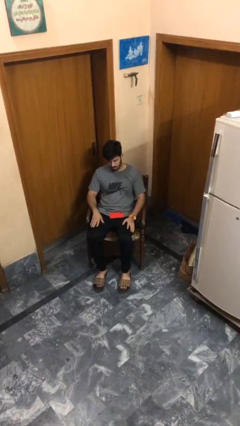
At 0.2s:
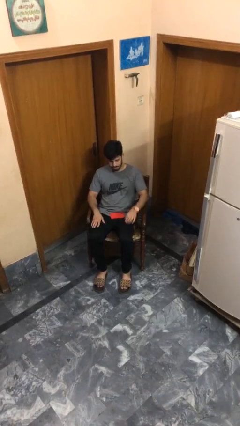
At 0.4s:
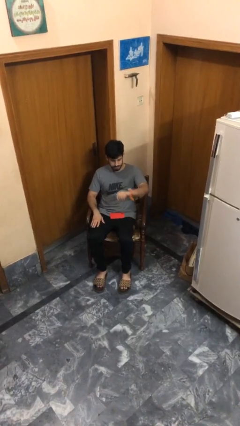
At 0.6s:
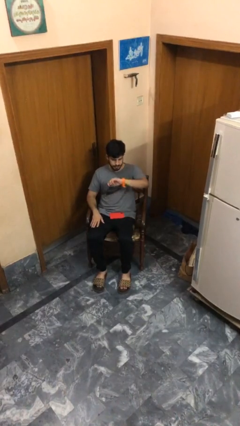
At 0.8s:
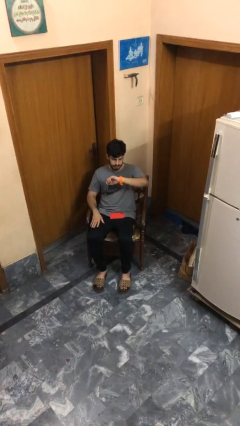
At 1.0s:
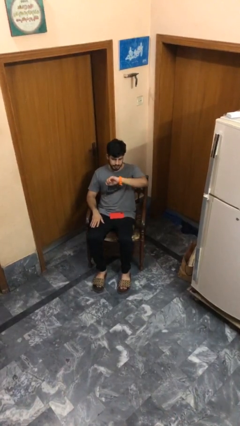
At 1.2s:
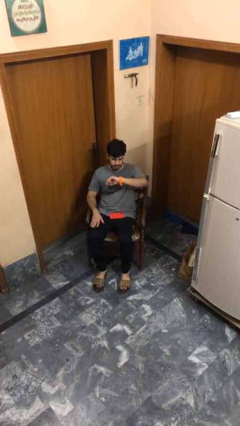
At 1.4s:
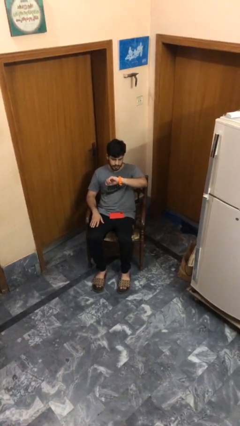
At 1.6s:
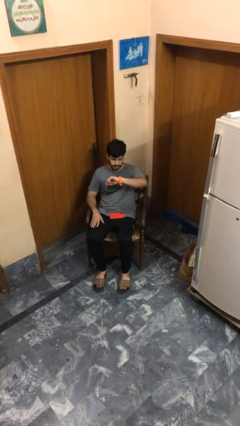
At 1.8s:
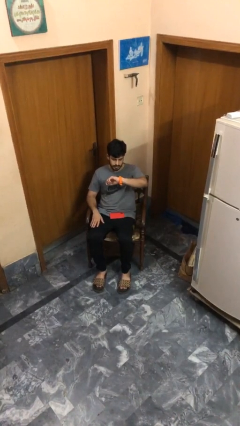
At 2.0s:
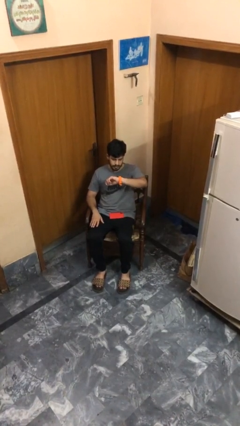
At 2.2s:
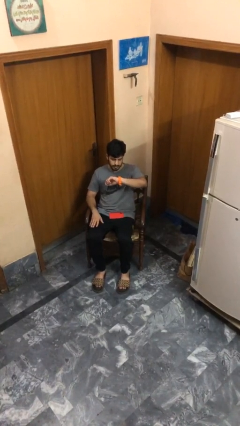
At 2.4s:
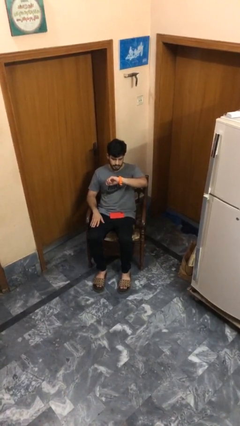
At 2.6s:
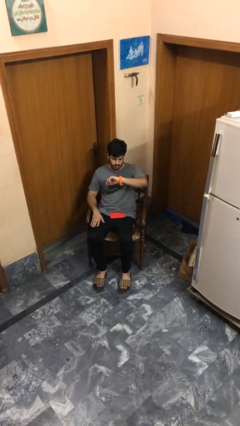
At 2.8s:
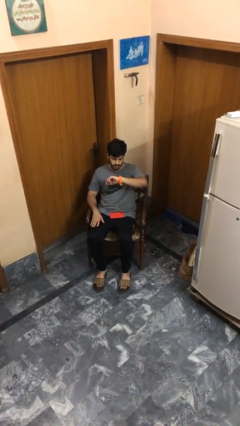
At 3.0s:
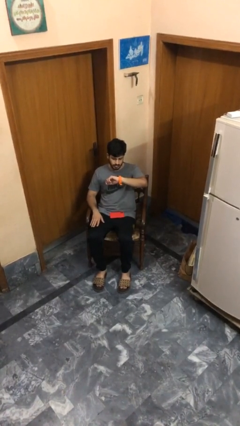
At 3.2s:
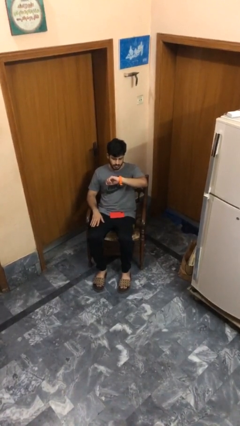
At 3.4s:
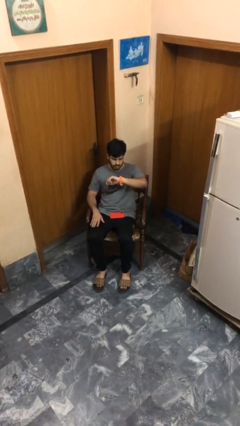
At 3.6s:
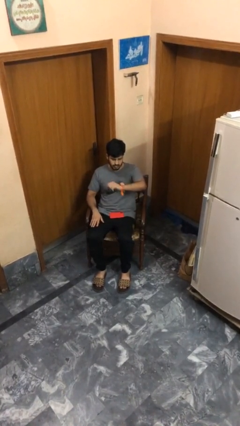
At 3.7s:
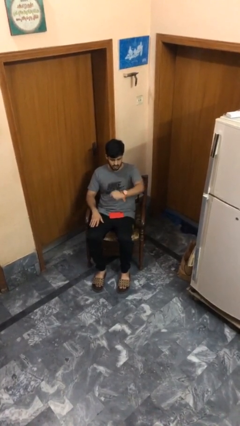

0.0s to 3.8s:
person looks at wristwatch

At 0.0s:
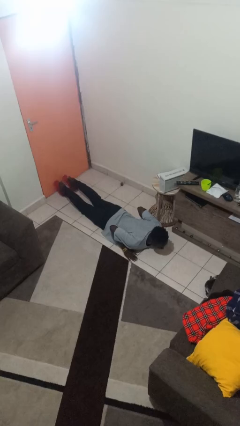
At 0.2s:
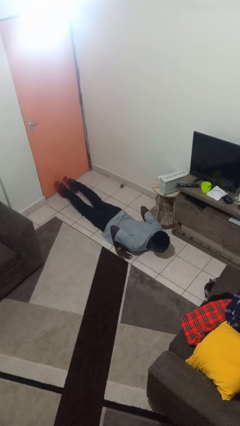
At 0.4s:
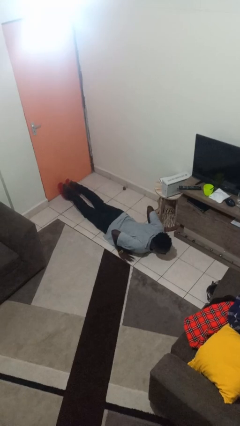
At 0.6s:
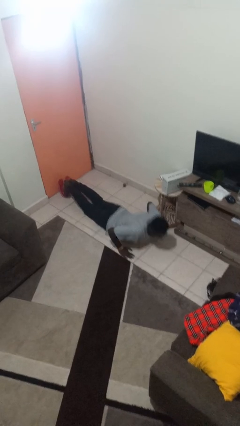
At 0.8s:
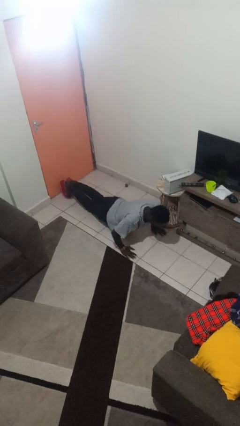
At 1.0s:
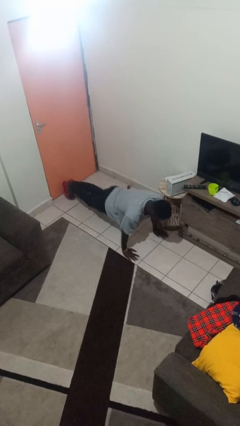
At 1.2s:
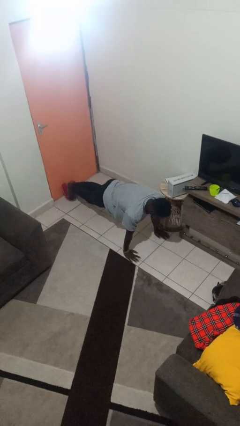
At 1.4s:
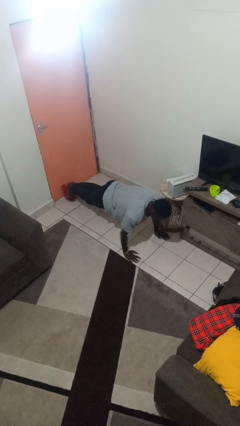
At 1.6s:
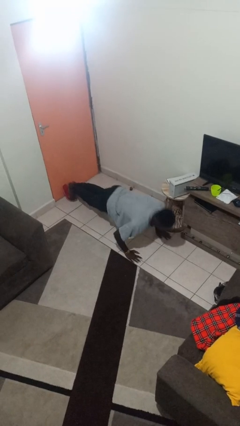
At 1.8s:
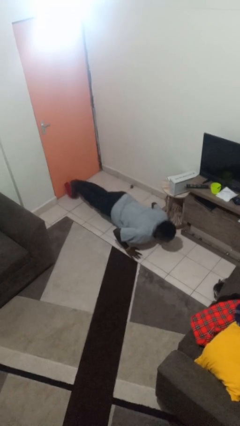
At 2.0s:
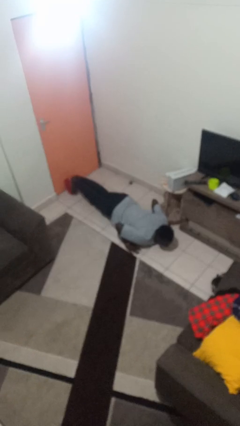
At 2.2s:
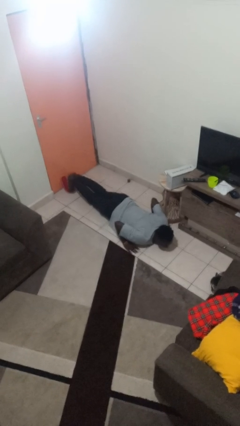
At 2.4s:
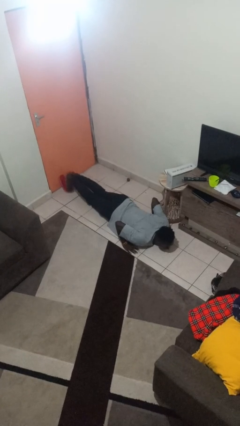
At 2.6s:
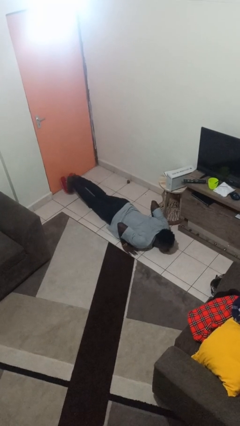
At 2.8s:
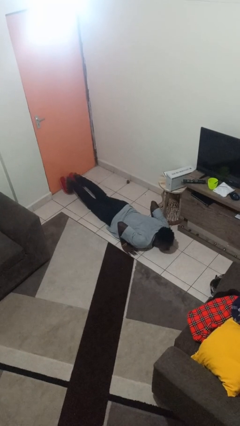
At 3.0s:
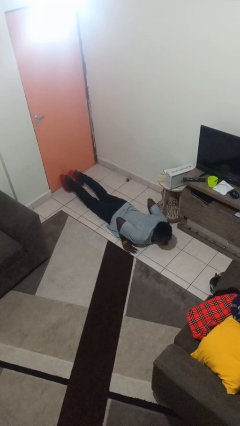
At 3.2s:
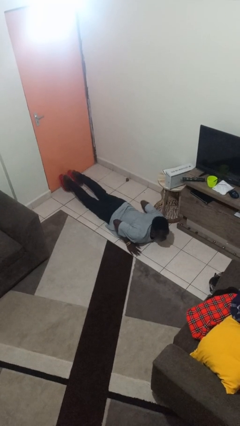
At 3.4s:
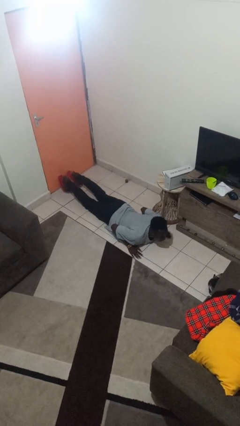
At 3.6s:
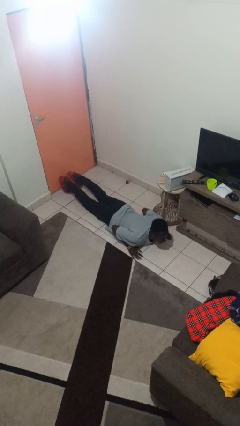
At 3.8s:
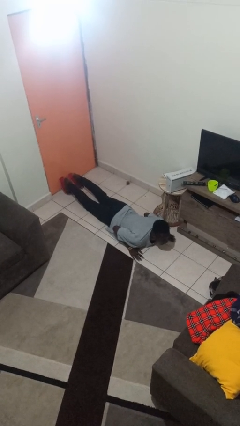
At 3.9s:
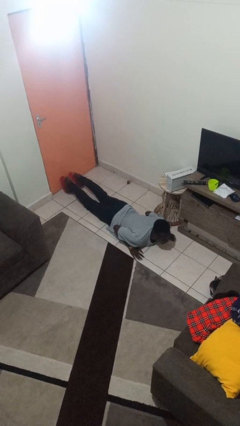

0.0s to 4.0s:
person exercises with pushup

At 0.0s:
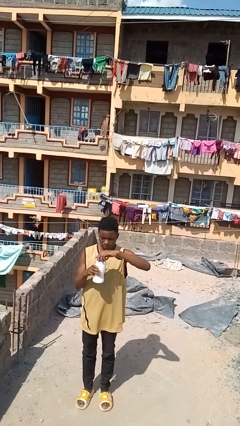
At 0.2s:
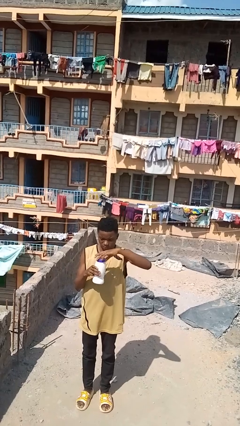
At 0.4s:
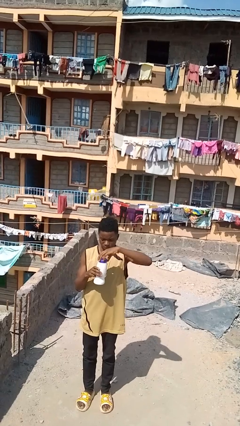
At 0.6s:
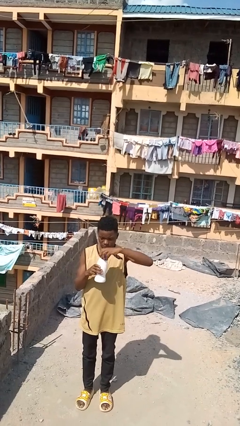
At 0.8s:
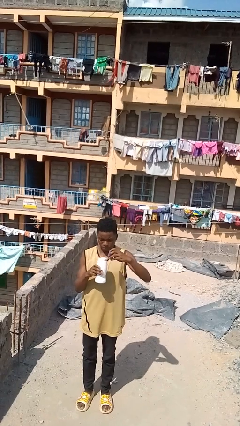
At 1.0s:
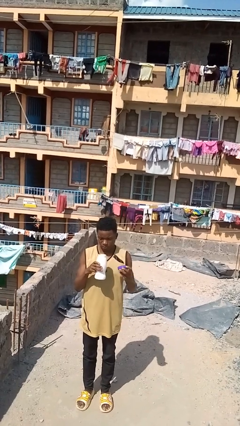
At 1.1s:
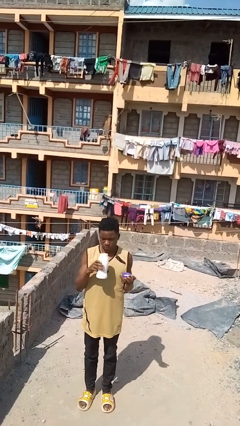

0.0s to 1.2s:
person opens beverage can

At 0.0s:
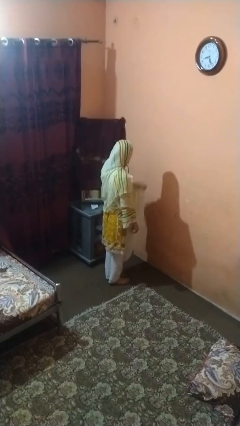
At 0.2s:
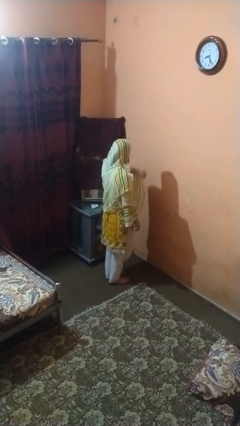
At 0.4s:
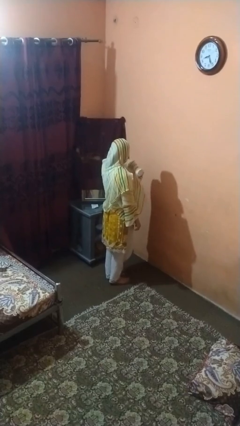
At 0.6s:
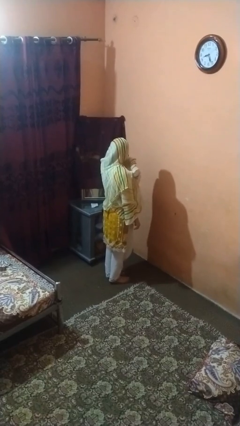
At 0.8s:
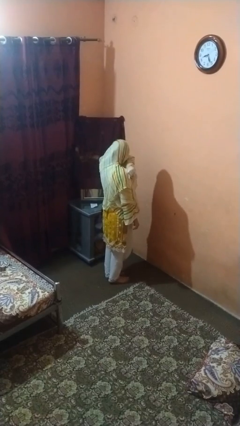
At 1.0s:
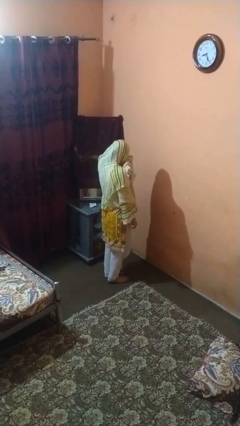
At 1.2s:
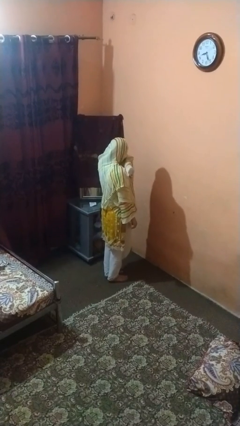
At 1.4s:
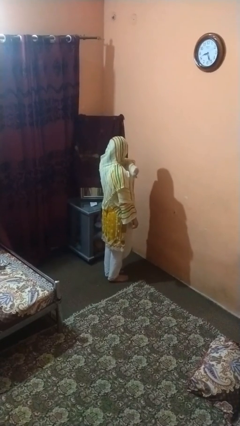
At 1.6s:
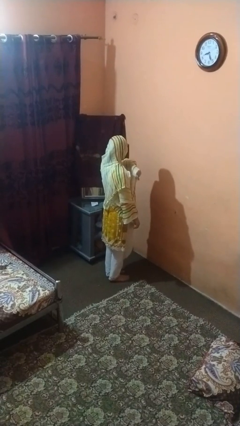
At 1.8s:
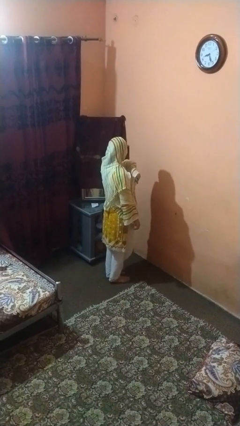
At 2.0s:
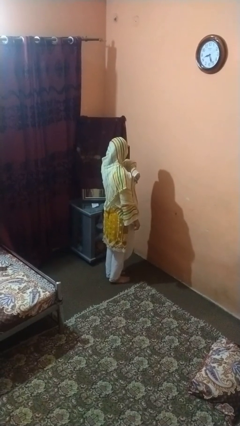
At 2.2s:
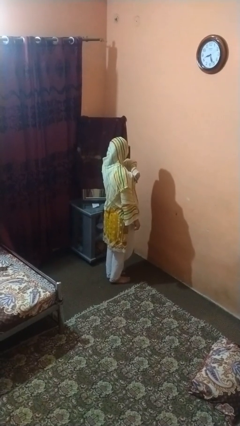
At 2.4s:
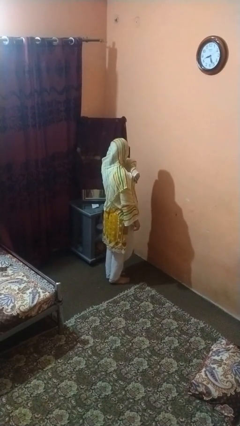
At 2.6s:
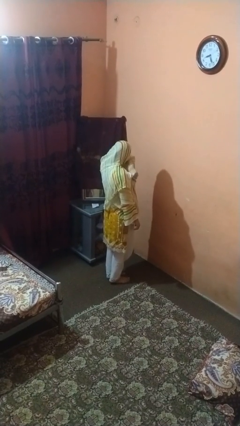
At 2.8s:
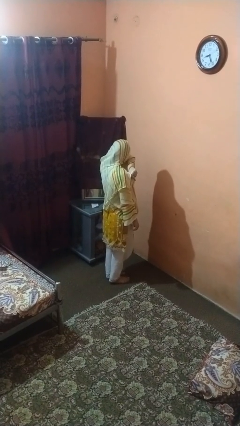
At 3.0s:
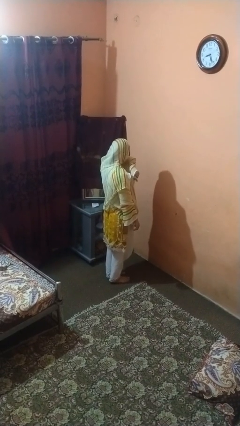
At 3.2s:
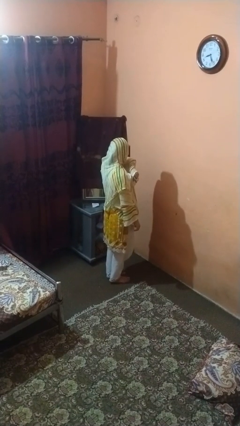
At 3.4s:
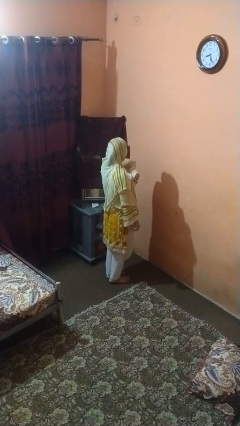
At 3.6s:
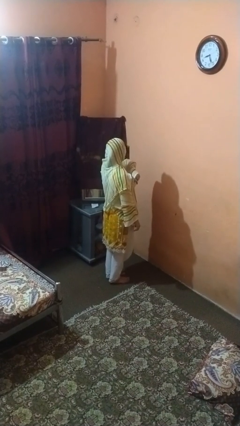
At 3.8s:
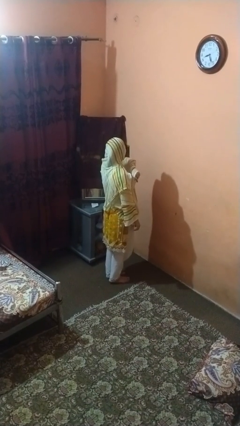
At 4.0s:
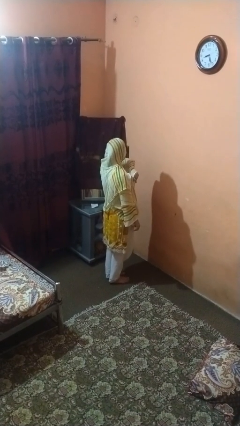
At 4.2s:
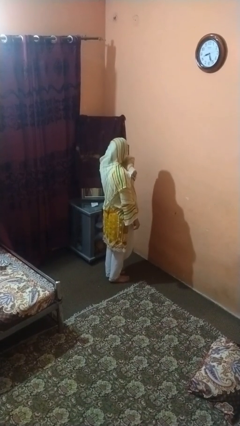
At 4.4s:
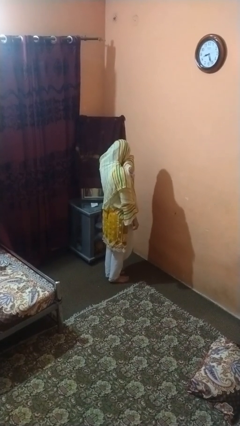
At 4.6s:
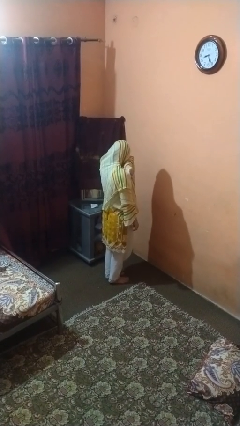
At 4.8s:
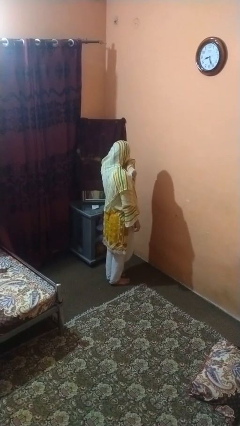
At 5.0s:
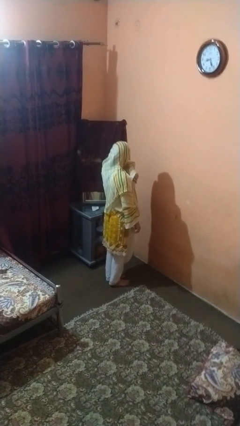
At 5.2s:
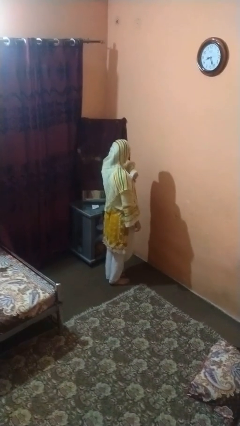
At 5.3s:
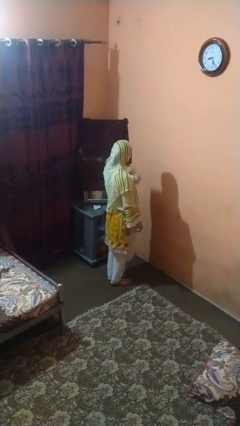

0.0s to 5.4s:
person sneezes into arm

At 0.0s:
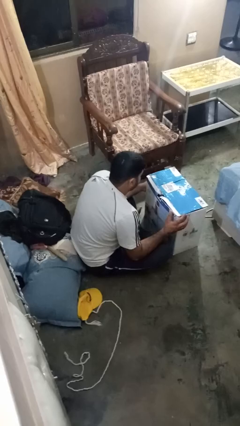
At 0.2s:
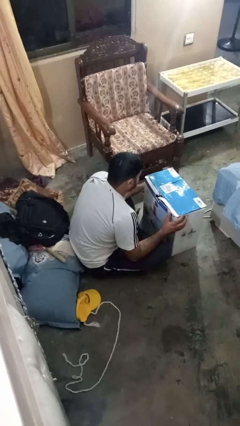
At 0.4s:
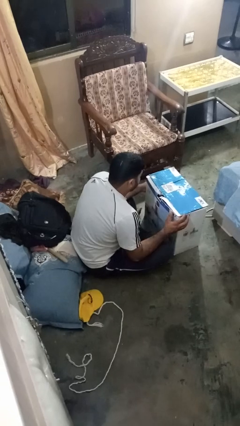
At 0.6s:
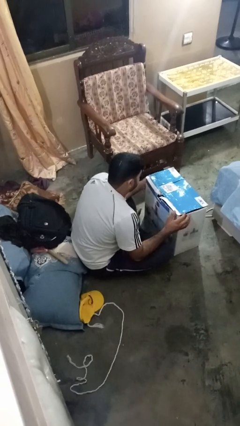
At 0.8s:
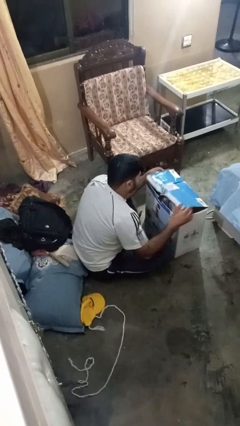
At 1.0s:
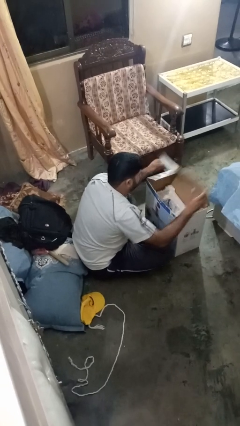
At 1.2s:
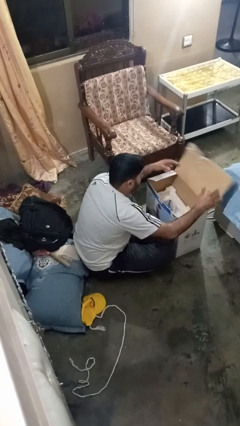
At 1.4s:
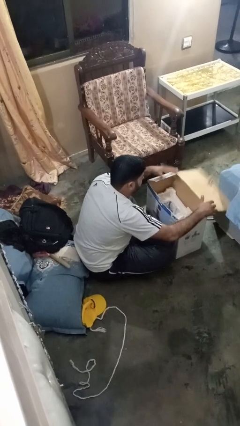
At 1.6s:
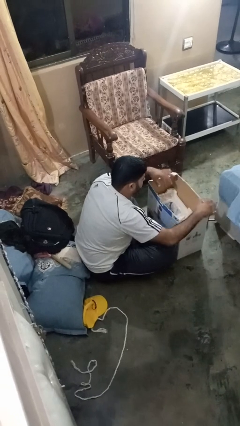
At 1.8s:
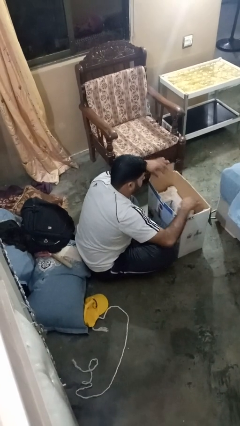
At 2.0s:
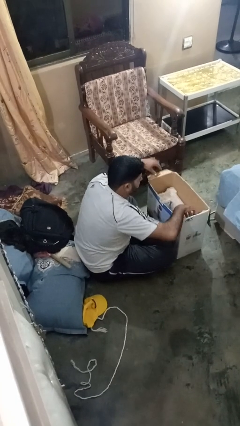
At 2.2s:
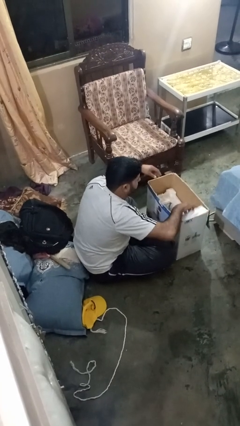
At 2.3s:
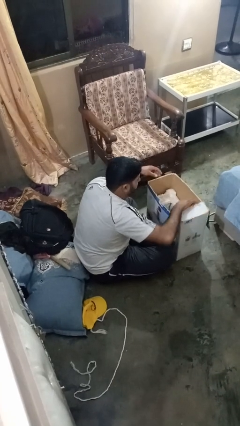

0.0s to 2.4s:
person opens box

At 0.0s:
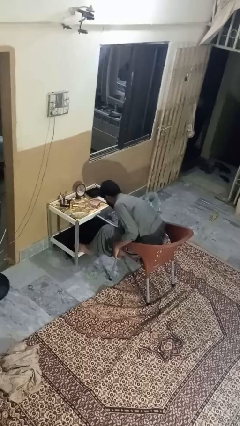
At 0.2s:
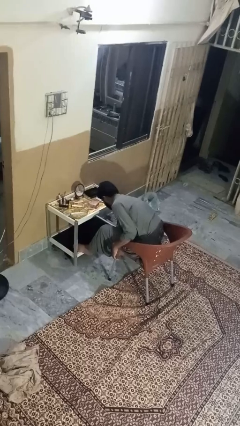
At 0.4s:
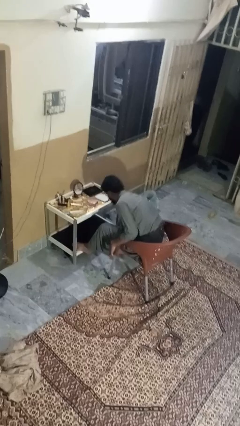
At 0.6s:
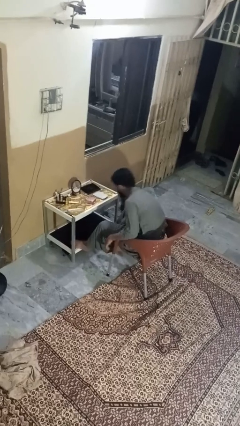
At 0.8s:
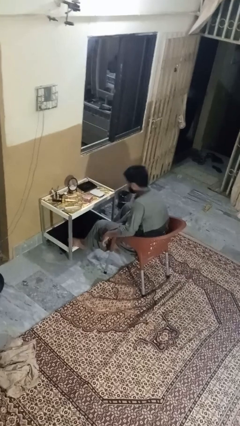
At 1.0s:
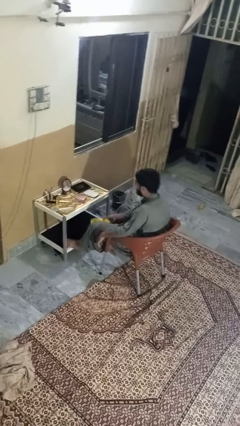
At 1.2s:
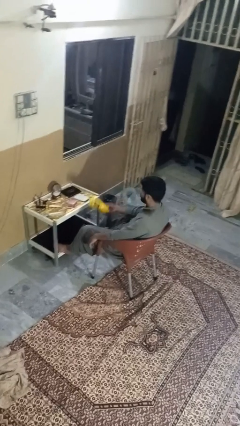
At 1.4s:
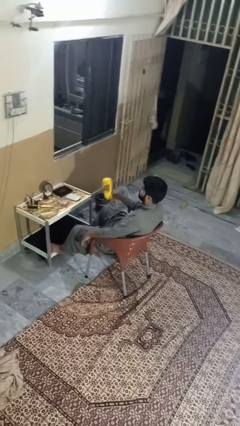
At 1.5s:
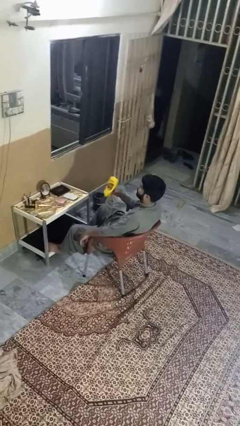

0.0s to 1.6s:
person picks up object from floor
